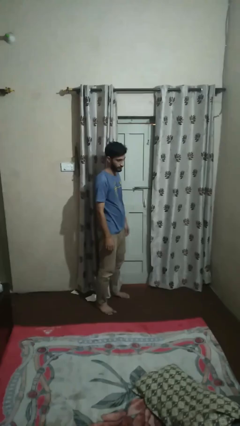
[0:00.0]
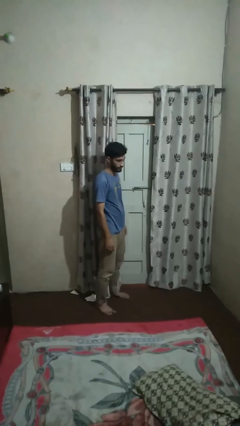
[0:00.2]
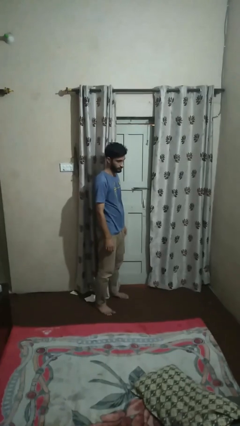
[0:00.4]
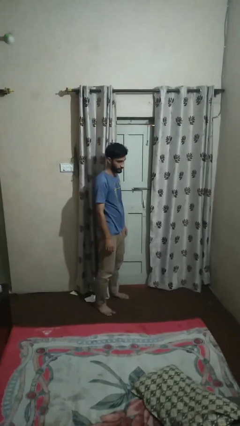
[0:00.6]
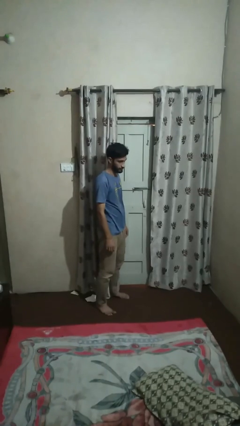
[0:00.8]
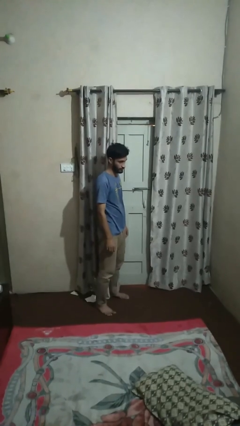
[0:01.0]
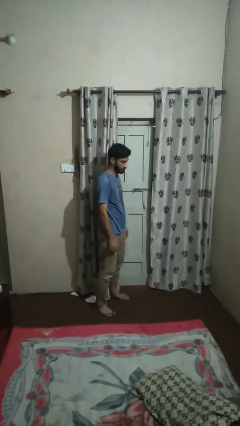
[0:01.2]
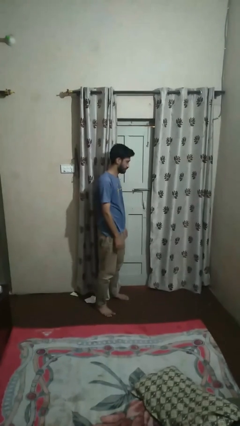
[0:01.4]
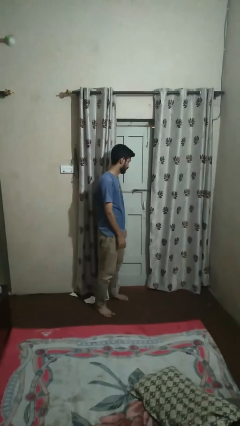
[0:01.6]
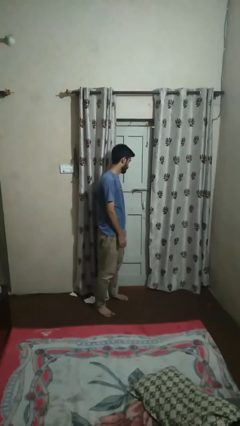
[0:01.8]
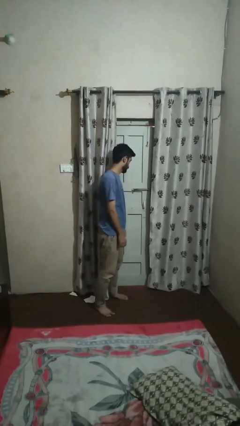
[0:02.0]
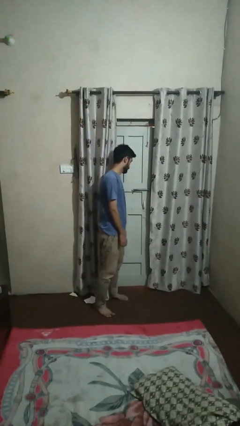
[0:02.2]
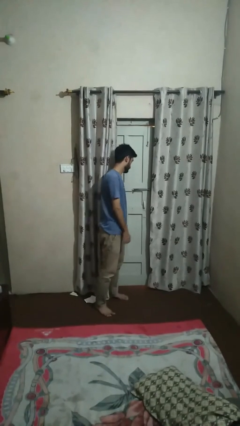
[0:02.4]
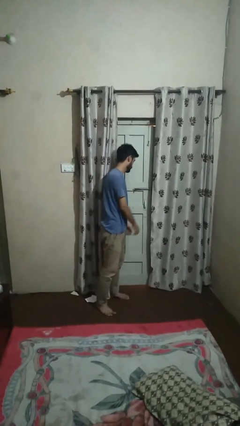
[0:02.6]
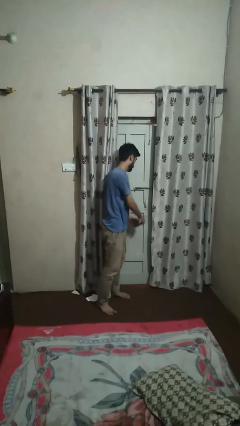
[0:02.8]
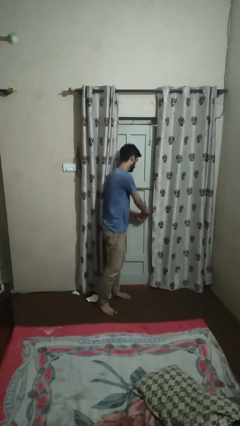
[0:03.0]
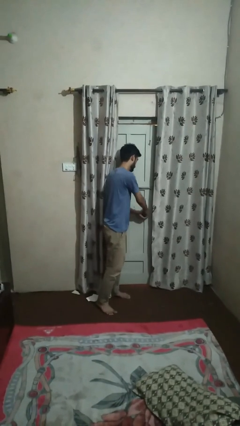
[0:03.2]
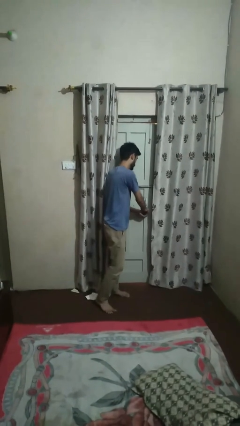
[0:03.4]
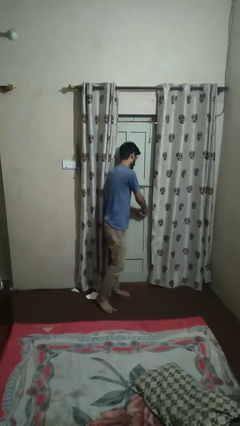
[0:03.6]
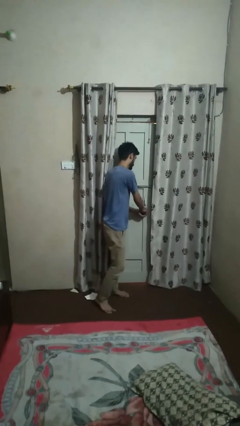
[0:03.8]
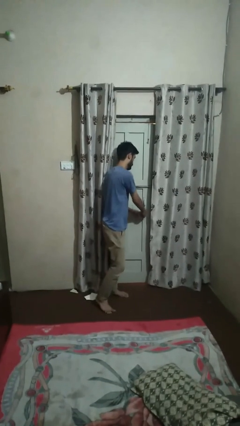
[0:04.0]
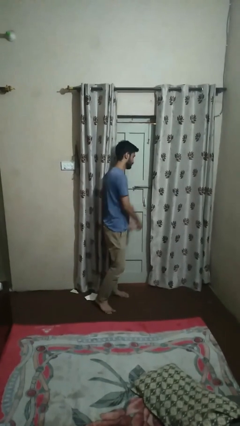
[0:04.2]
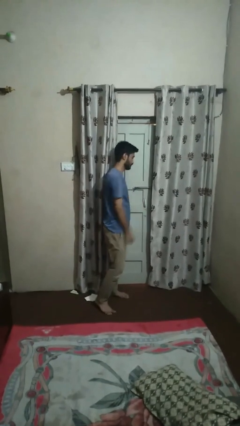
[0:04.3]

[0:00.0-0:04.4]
person unlocks door with keys

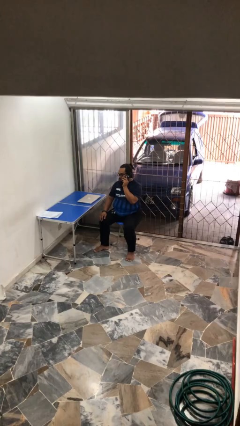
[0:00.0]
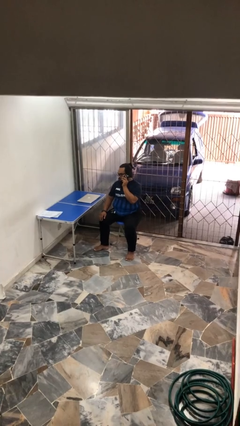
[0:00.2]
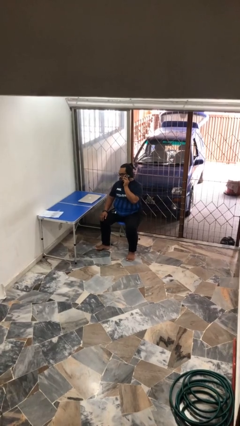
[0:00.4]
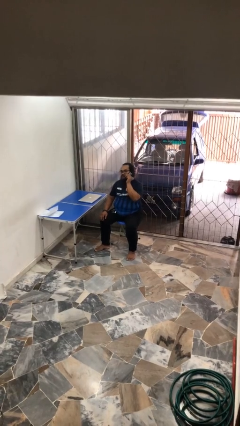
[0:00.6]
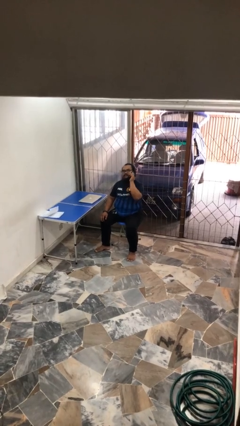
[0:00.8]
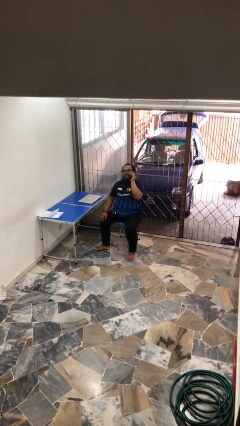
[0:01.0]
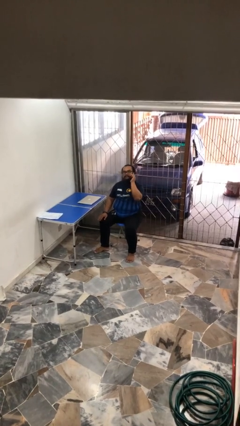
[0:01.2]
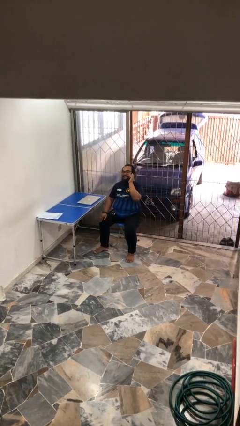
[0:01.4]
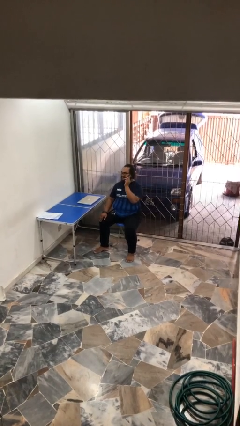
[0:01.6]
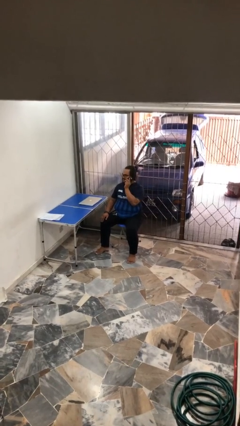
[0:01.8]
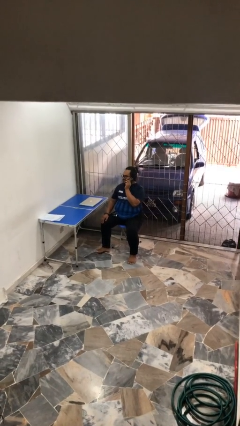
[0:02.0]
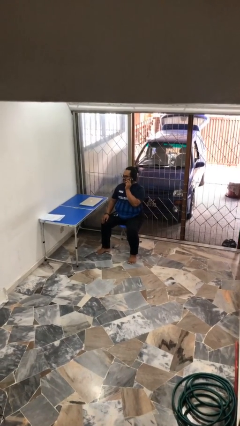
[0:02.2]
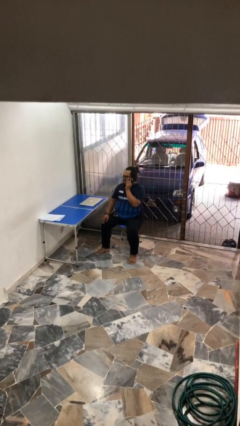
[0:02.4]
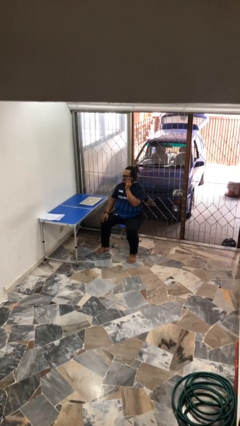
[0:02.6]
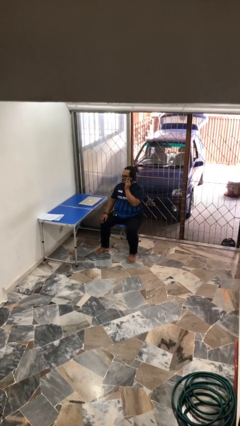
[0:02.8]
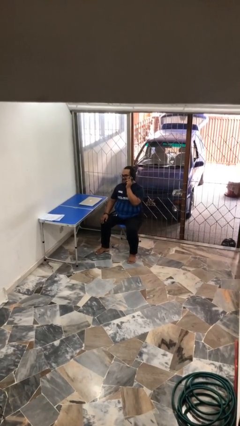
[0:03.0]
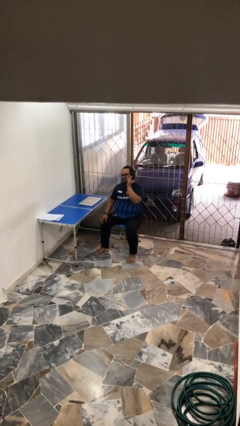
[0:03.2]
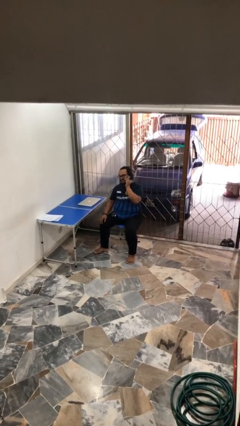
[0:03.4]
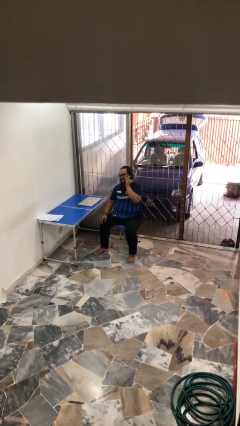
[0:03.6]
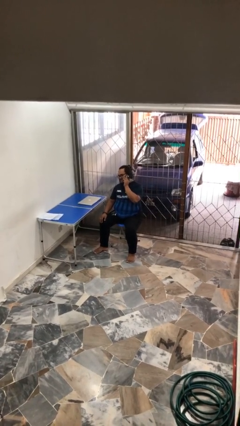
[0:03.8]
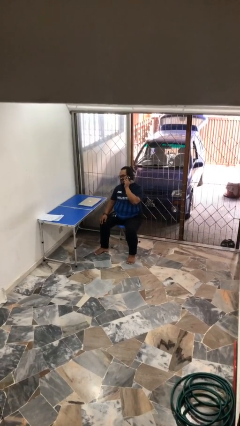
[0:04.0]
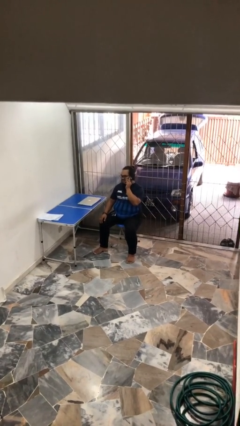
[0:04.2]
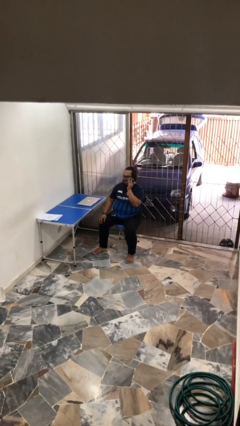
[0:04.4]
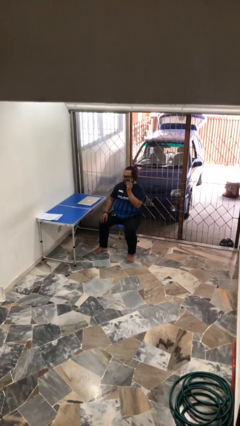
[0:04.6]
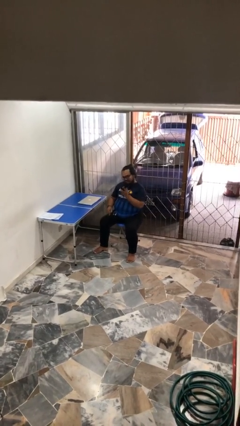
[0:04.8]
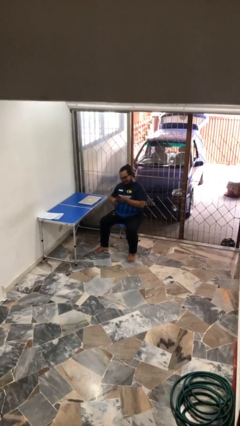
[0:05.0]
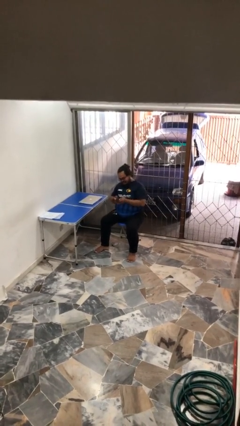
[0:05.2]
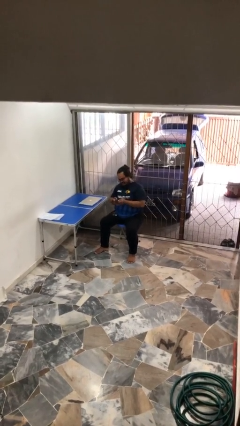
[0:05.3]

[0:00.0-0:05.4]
person talks on phone

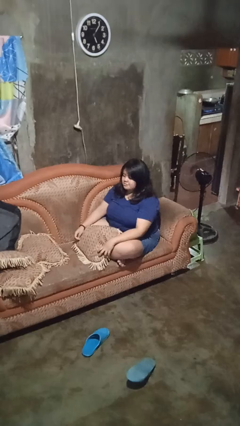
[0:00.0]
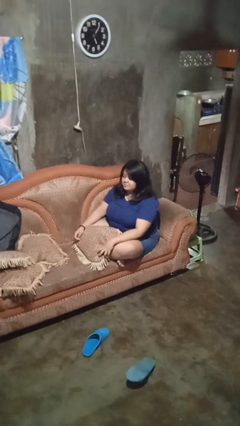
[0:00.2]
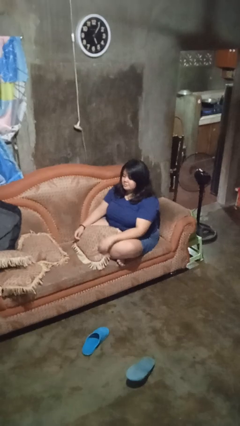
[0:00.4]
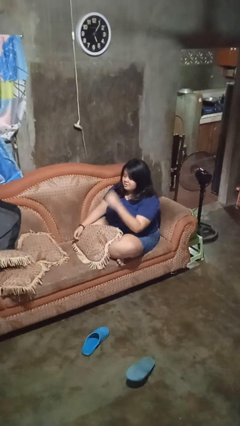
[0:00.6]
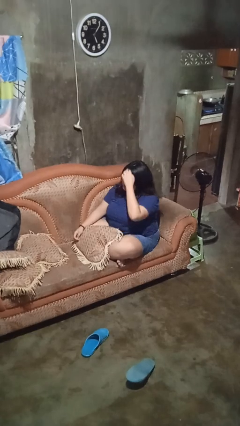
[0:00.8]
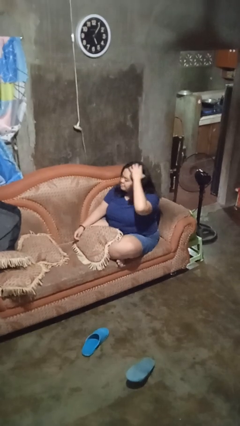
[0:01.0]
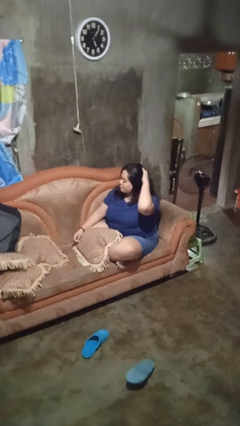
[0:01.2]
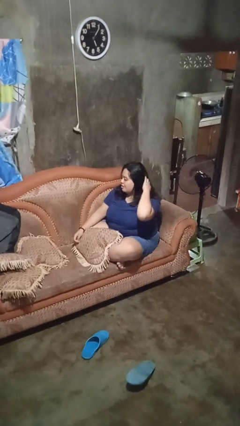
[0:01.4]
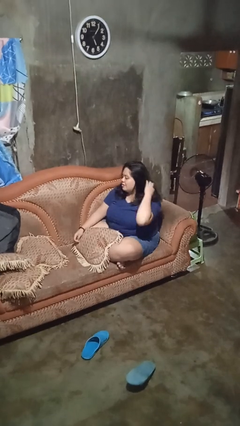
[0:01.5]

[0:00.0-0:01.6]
person strokes hair

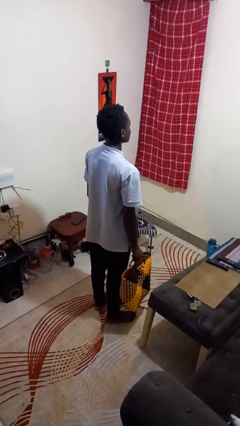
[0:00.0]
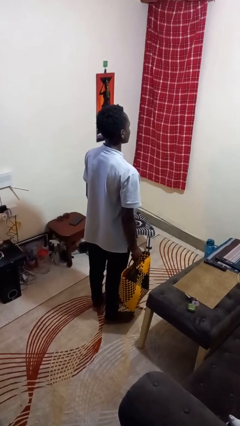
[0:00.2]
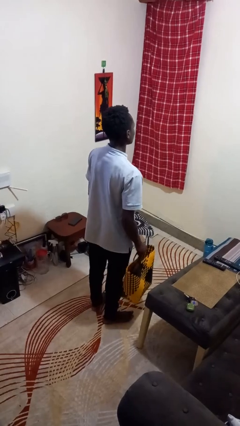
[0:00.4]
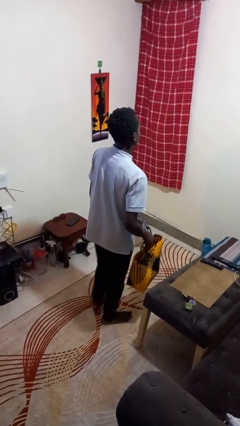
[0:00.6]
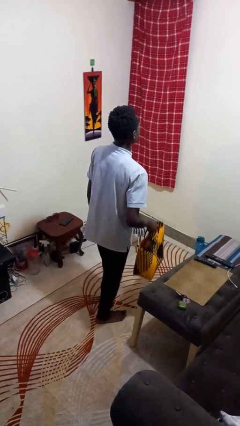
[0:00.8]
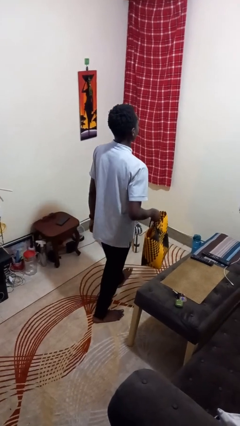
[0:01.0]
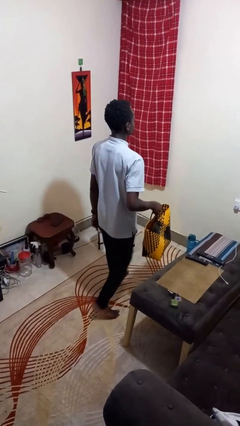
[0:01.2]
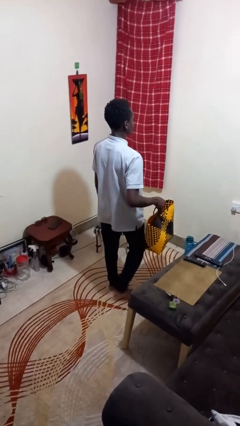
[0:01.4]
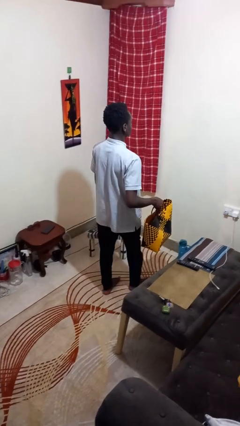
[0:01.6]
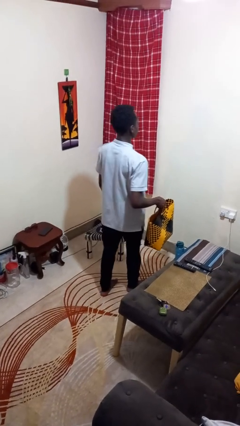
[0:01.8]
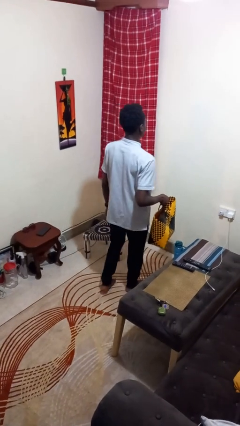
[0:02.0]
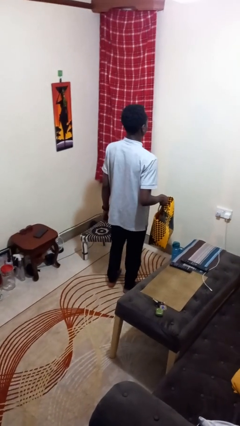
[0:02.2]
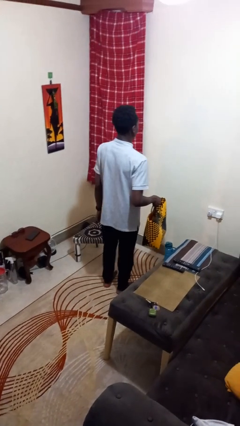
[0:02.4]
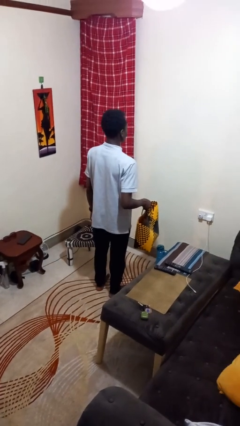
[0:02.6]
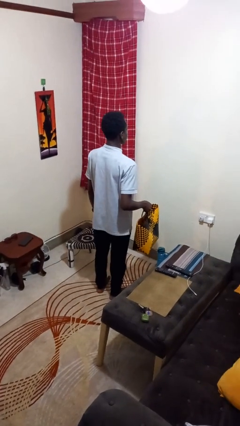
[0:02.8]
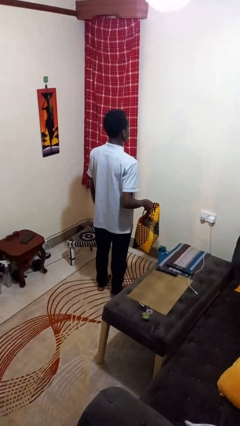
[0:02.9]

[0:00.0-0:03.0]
person carries groceries

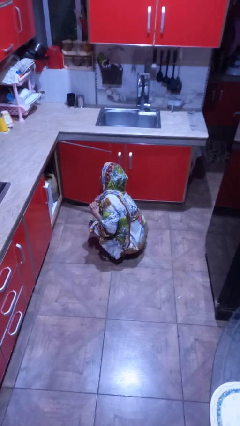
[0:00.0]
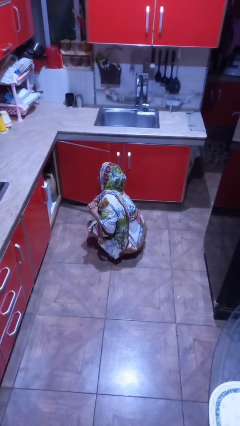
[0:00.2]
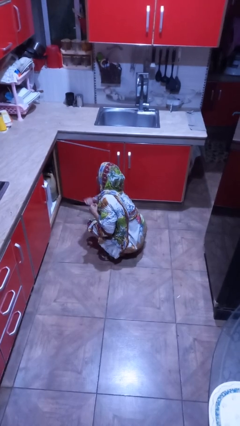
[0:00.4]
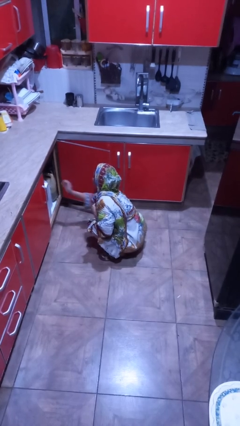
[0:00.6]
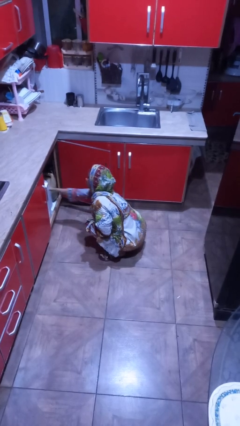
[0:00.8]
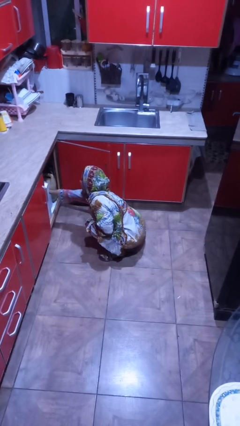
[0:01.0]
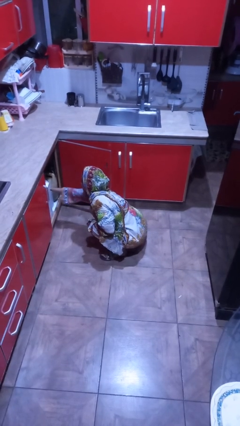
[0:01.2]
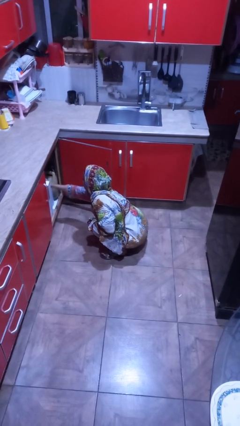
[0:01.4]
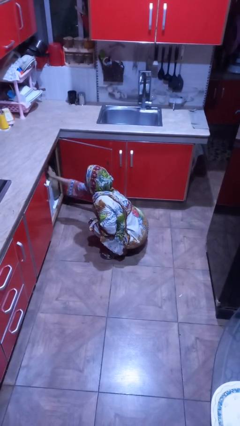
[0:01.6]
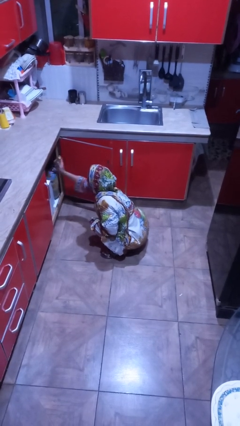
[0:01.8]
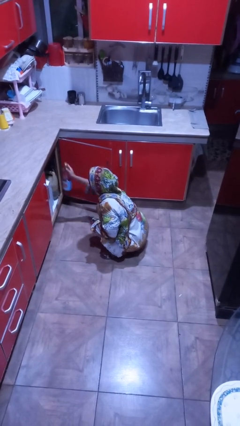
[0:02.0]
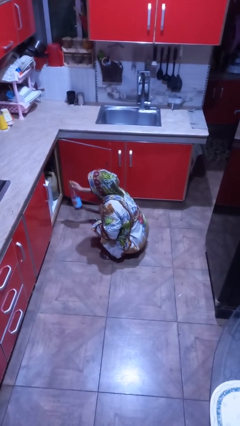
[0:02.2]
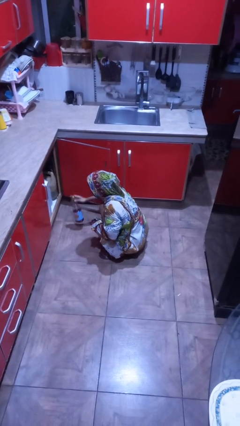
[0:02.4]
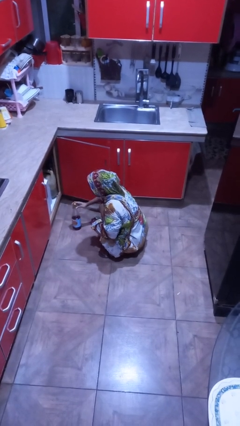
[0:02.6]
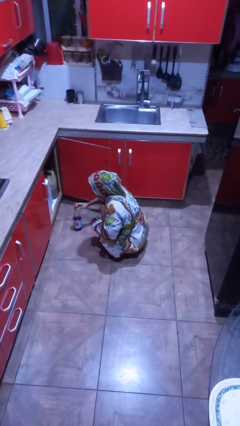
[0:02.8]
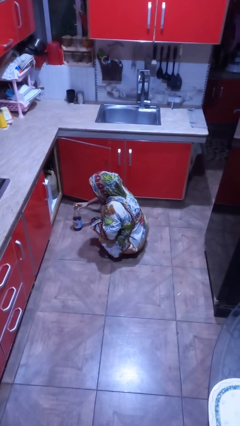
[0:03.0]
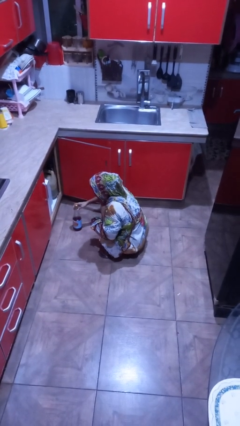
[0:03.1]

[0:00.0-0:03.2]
person takes object from cabinet
